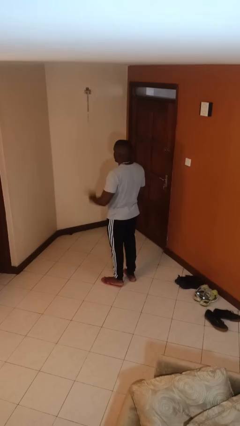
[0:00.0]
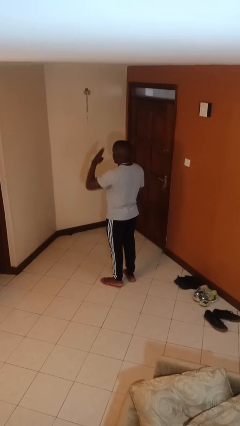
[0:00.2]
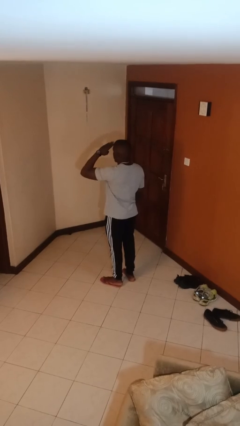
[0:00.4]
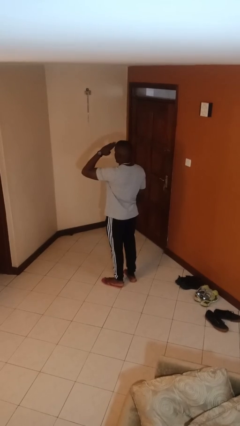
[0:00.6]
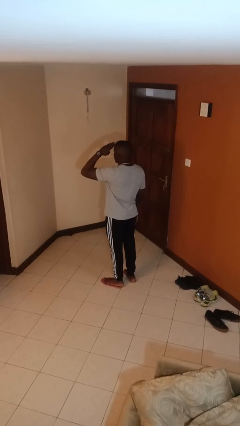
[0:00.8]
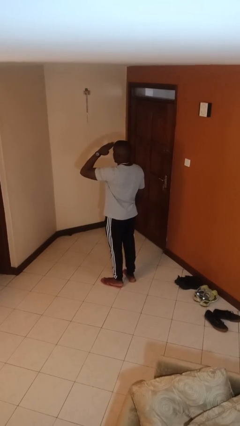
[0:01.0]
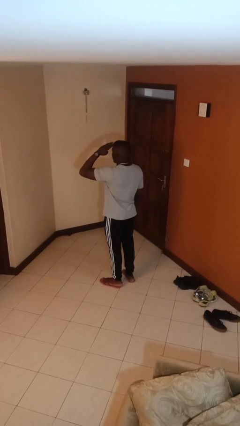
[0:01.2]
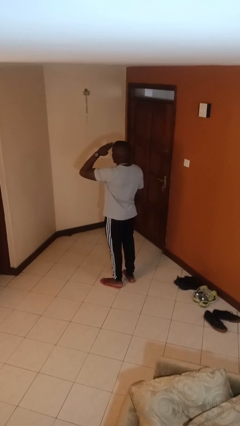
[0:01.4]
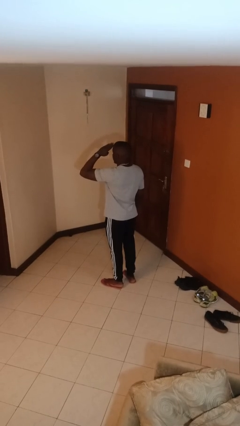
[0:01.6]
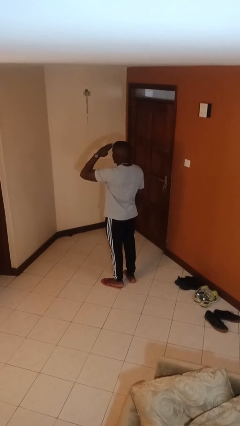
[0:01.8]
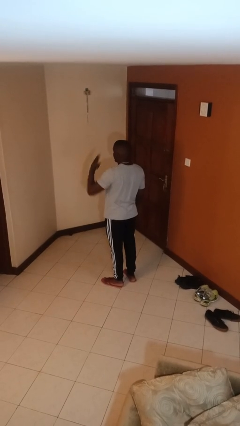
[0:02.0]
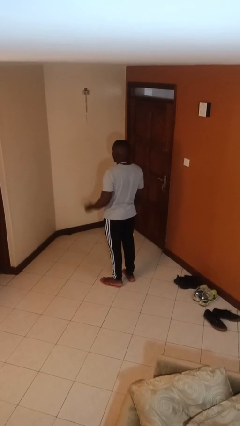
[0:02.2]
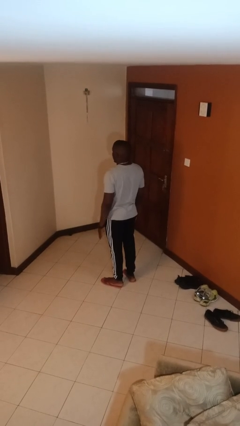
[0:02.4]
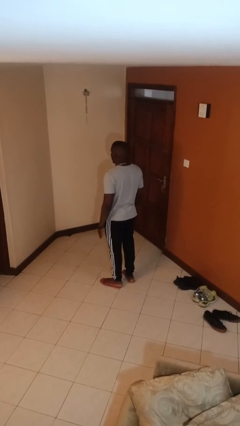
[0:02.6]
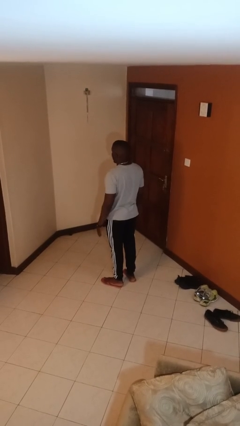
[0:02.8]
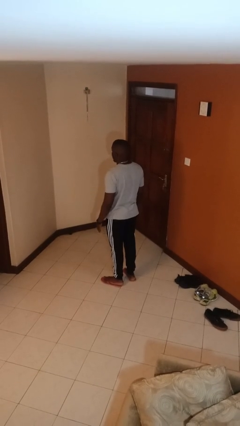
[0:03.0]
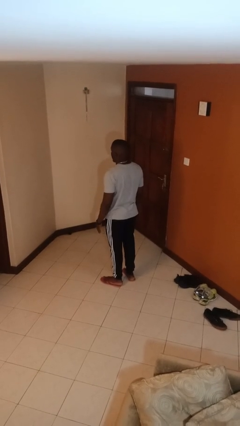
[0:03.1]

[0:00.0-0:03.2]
person salutes

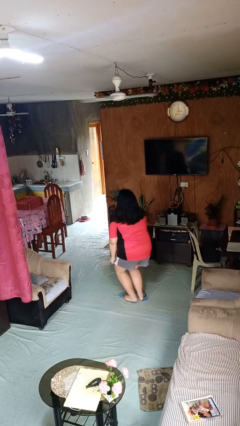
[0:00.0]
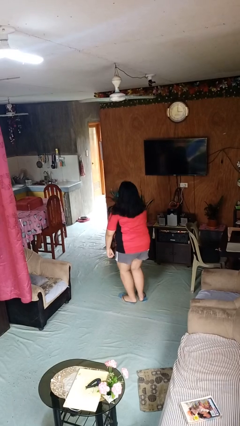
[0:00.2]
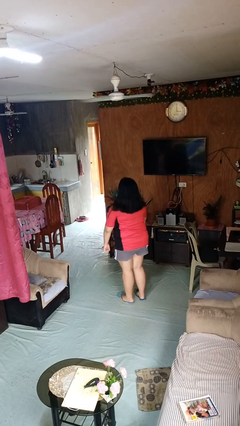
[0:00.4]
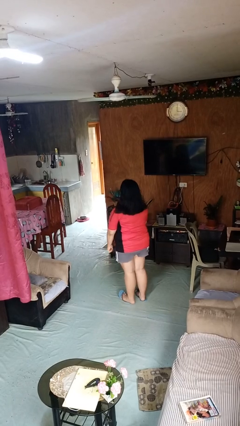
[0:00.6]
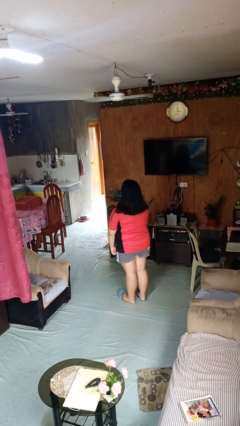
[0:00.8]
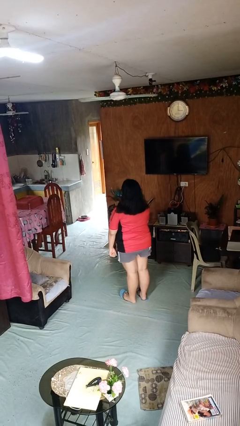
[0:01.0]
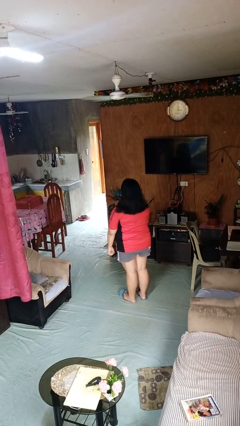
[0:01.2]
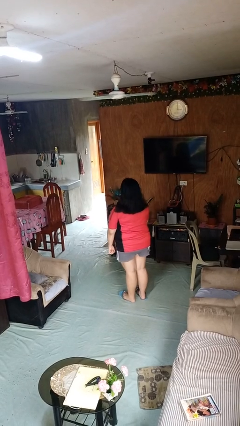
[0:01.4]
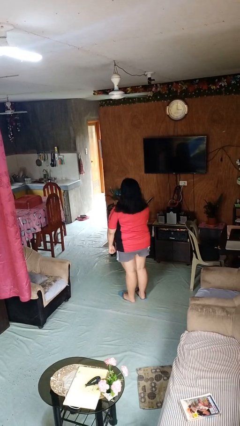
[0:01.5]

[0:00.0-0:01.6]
person stands up

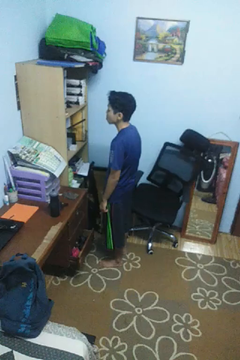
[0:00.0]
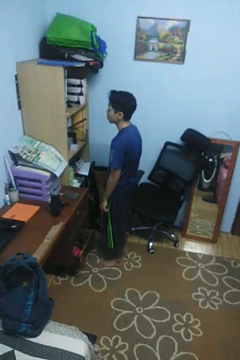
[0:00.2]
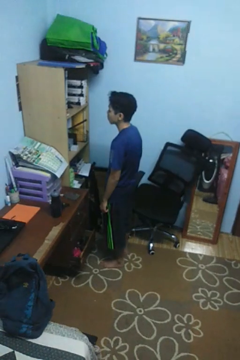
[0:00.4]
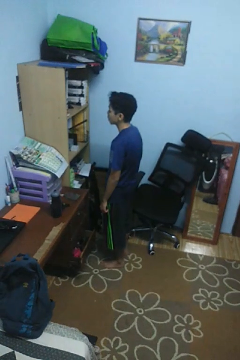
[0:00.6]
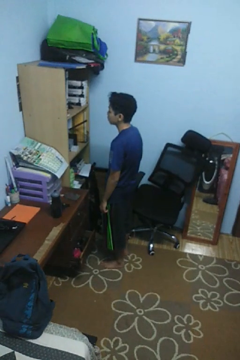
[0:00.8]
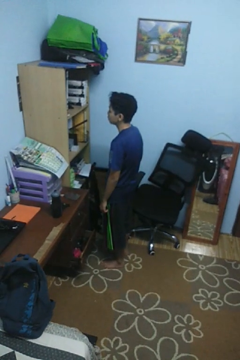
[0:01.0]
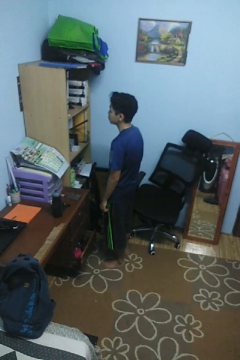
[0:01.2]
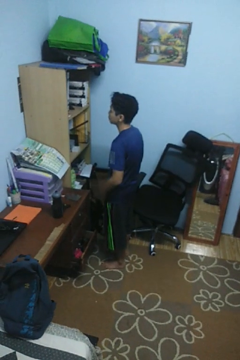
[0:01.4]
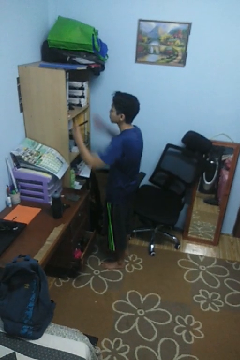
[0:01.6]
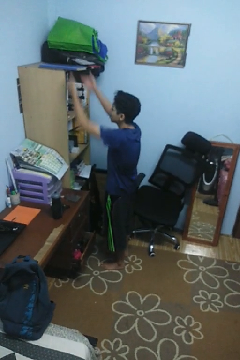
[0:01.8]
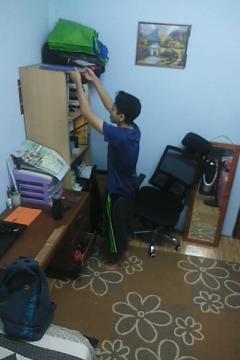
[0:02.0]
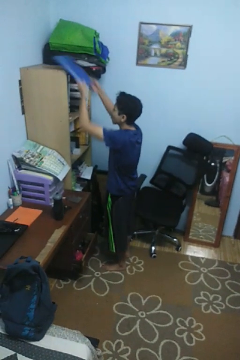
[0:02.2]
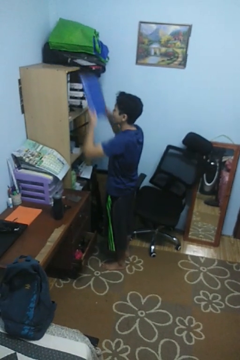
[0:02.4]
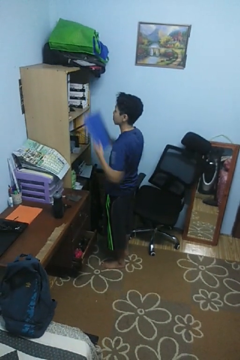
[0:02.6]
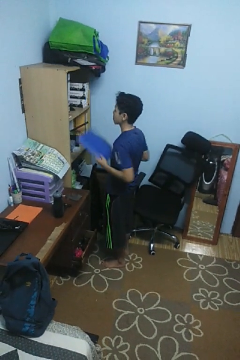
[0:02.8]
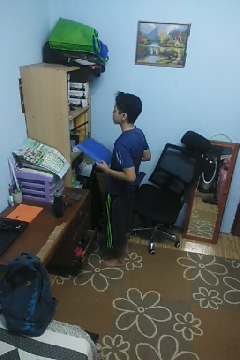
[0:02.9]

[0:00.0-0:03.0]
person picks up object from shelf

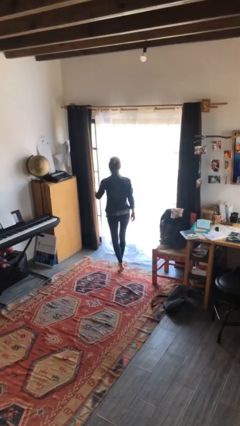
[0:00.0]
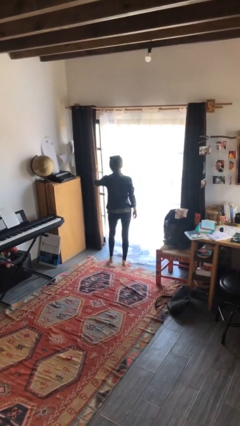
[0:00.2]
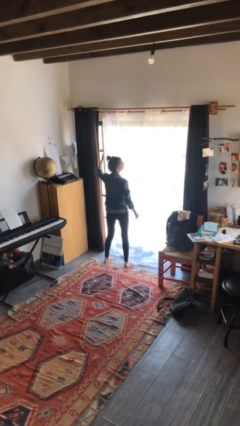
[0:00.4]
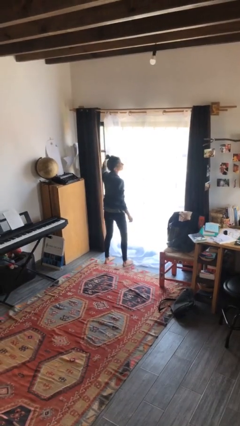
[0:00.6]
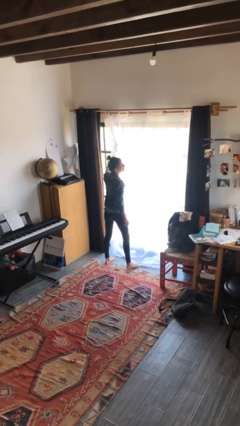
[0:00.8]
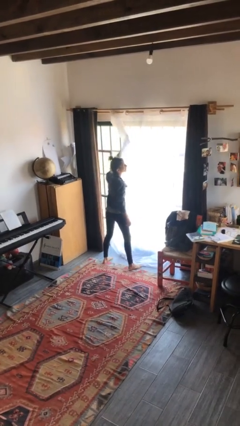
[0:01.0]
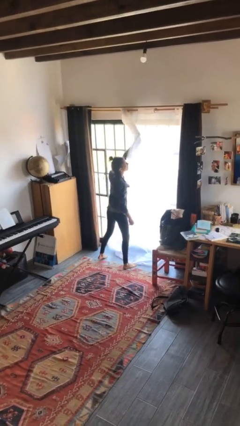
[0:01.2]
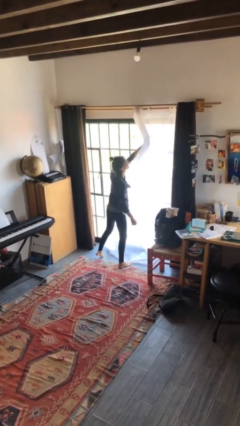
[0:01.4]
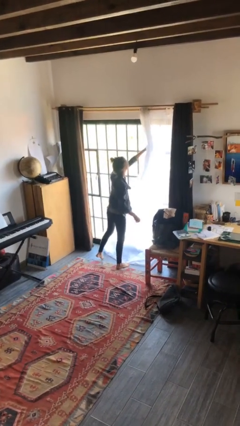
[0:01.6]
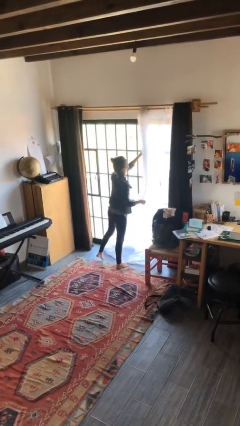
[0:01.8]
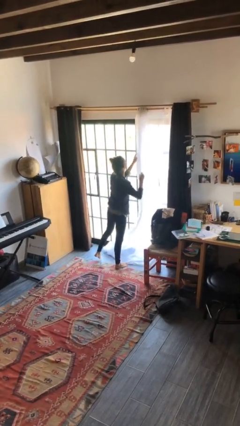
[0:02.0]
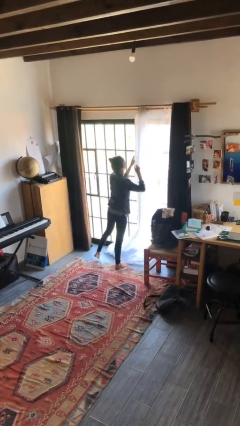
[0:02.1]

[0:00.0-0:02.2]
person opens curtains

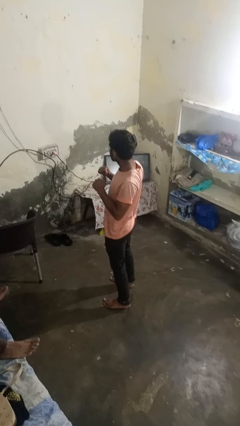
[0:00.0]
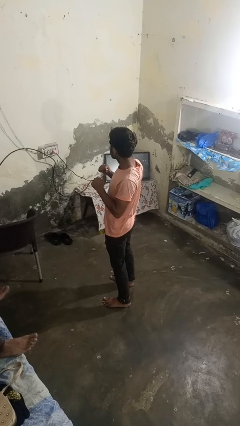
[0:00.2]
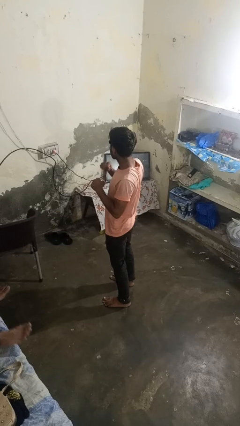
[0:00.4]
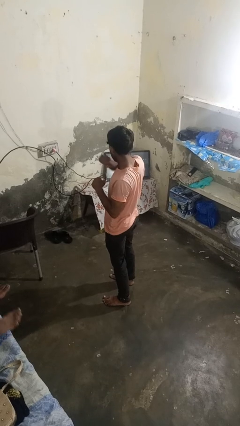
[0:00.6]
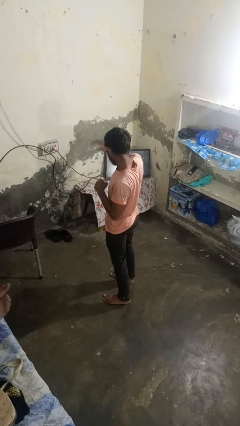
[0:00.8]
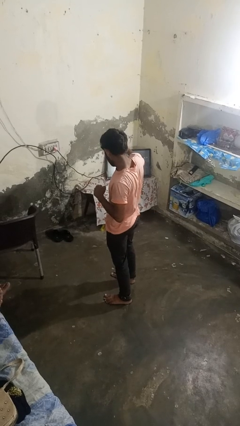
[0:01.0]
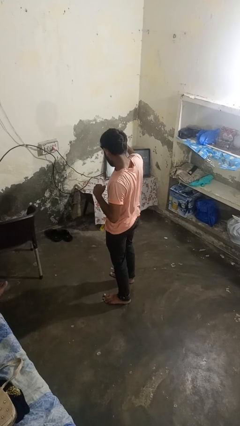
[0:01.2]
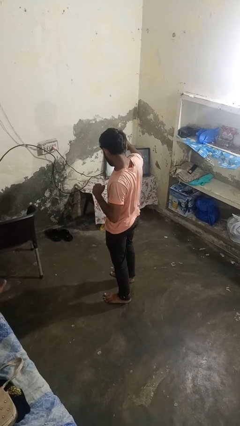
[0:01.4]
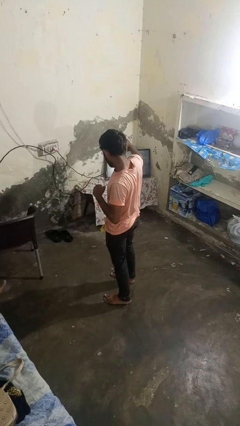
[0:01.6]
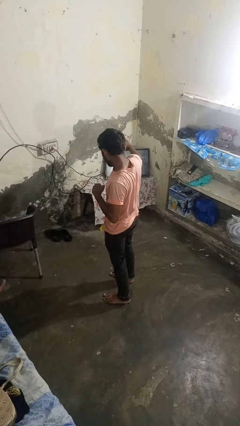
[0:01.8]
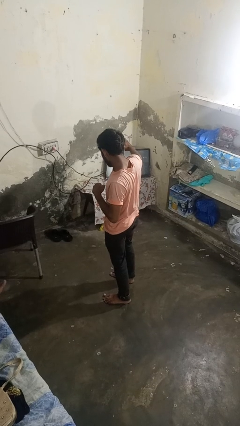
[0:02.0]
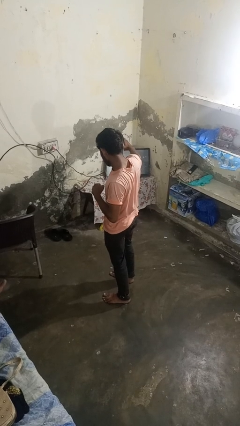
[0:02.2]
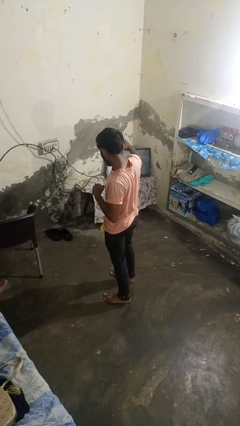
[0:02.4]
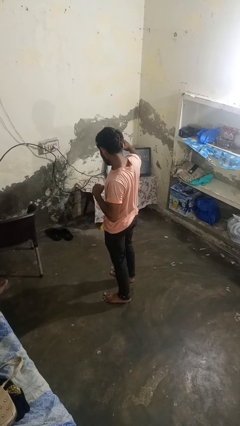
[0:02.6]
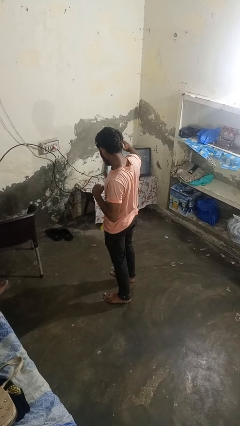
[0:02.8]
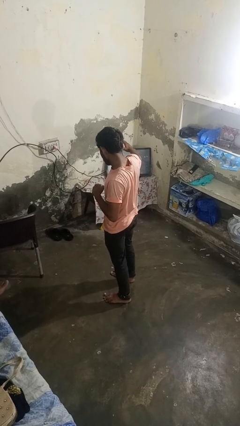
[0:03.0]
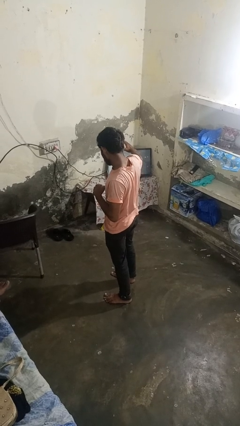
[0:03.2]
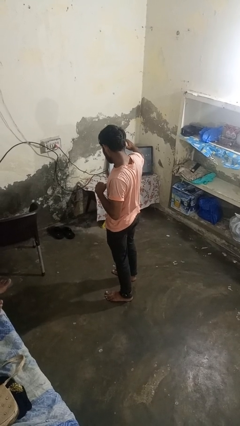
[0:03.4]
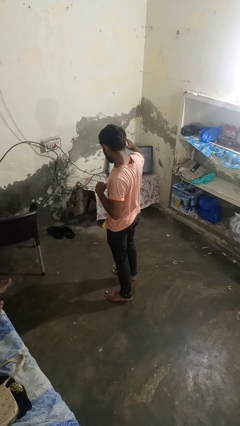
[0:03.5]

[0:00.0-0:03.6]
person karate chop

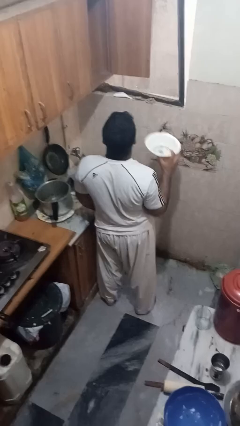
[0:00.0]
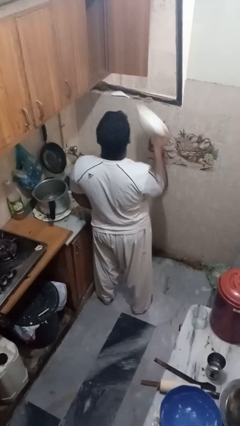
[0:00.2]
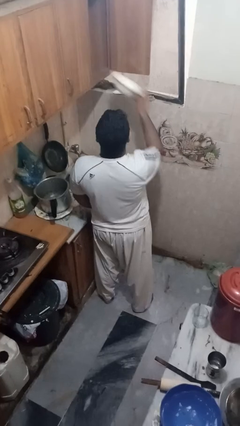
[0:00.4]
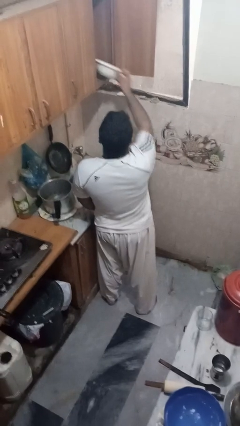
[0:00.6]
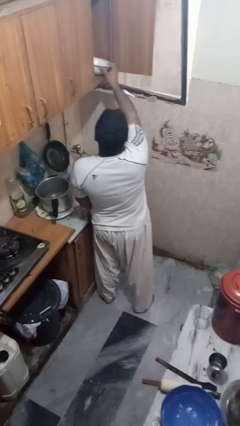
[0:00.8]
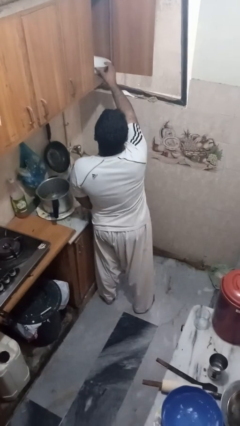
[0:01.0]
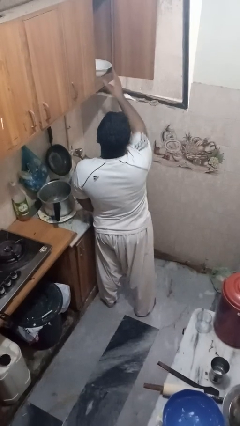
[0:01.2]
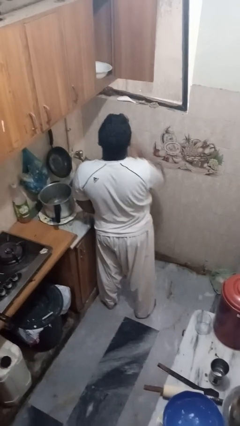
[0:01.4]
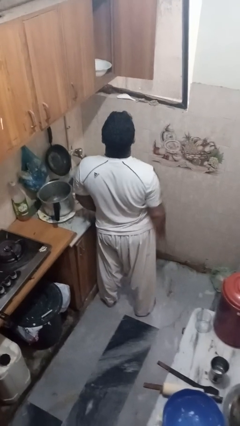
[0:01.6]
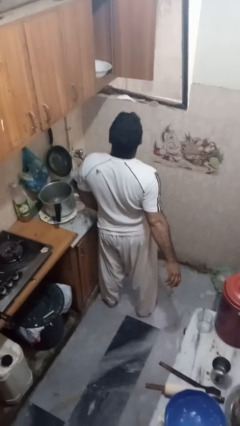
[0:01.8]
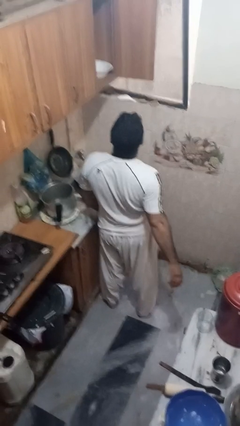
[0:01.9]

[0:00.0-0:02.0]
person puts object in cabinet

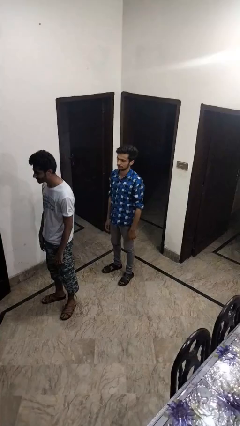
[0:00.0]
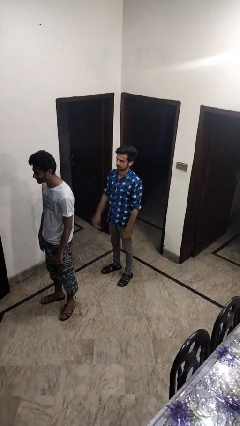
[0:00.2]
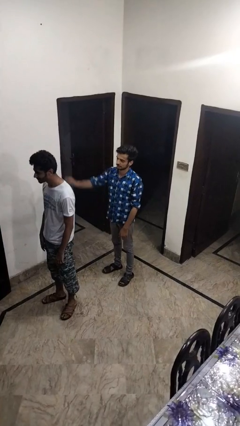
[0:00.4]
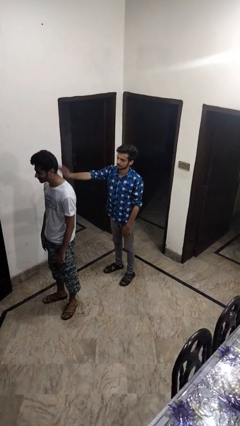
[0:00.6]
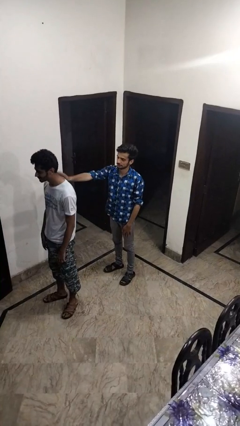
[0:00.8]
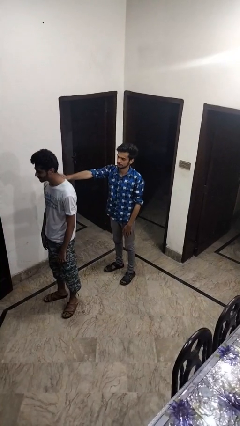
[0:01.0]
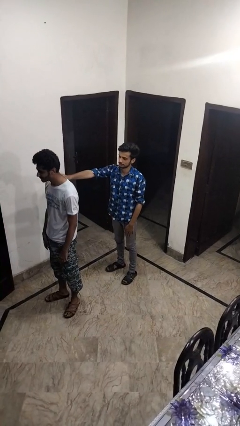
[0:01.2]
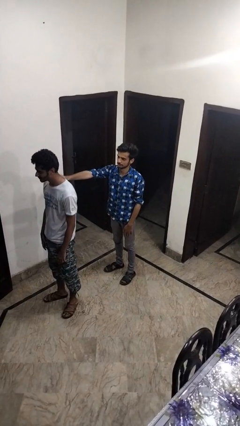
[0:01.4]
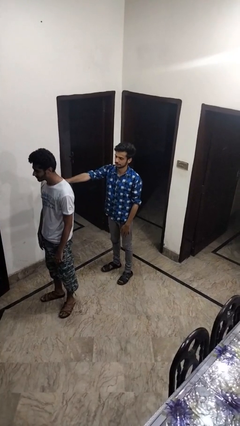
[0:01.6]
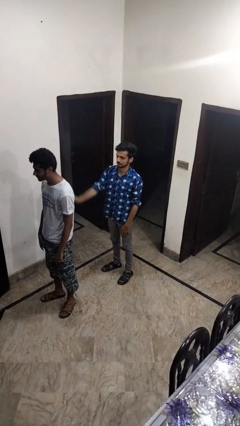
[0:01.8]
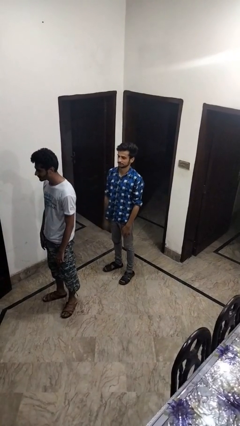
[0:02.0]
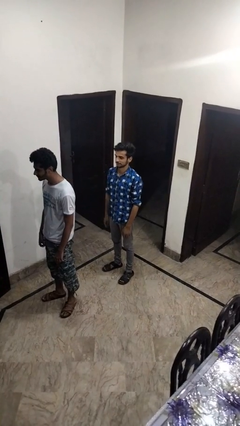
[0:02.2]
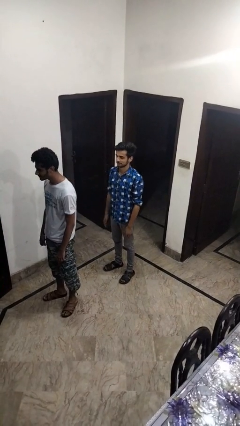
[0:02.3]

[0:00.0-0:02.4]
person touches back of person
